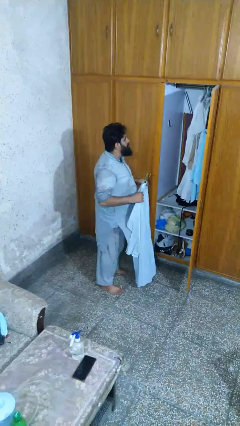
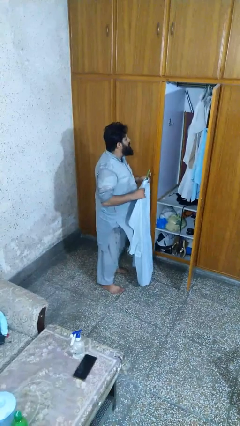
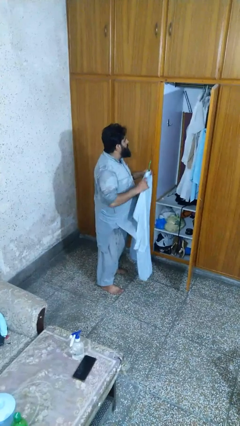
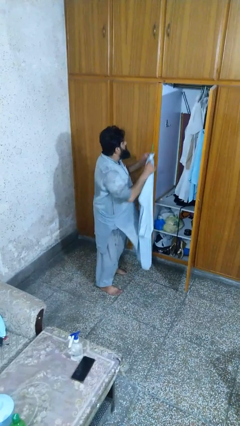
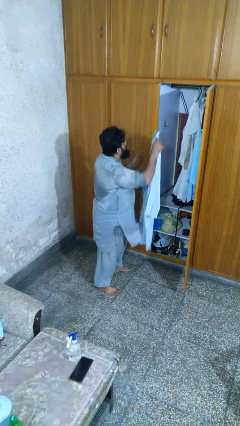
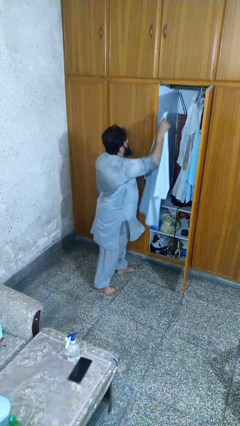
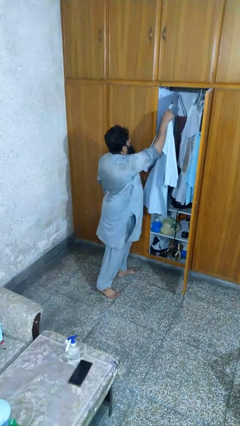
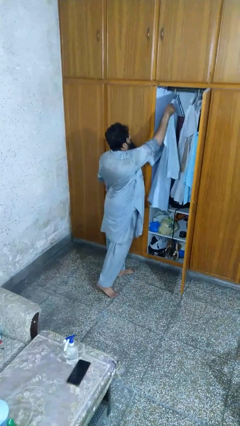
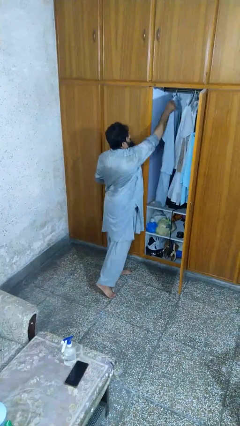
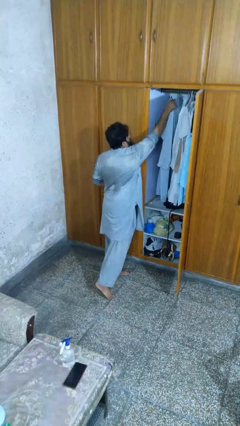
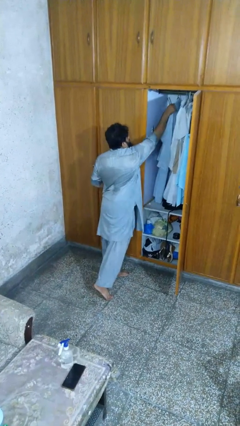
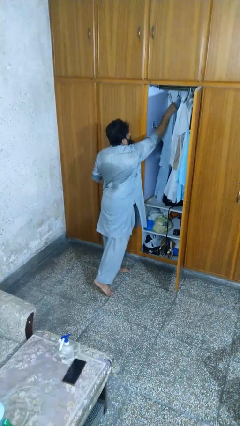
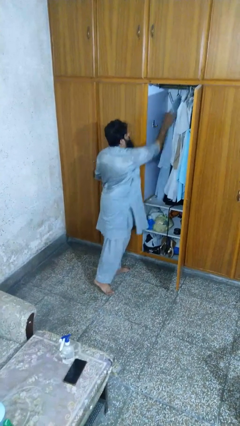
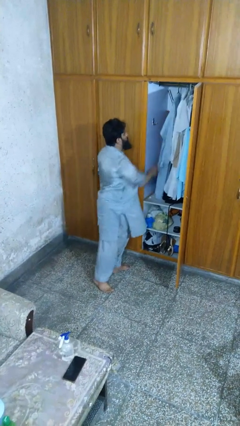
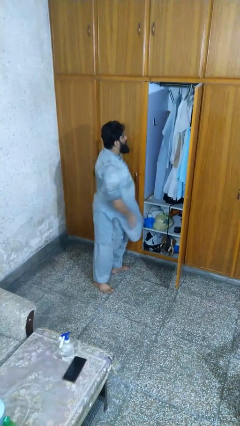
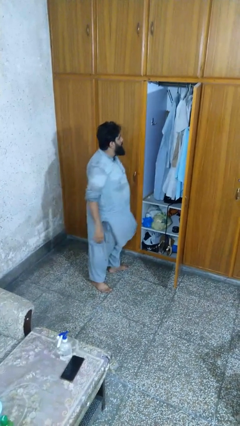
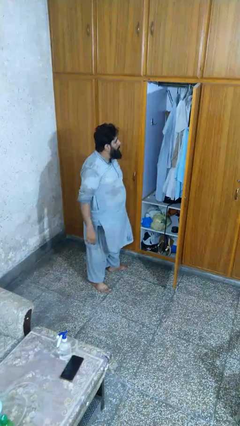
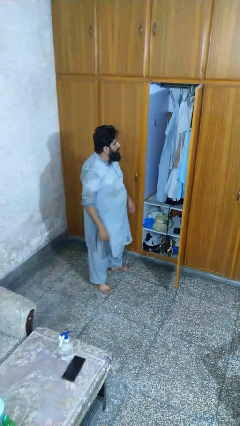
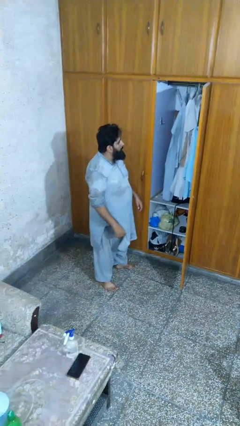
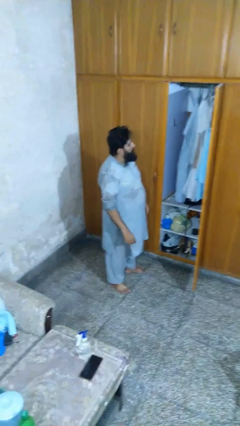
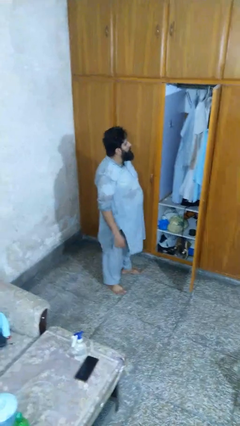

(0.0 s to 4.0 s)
person puts clothes into closet

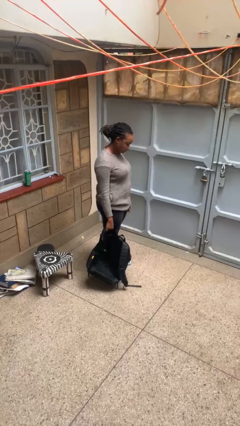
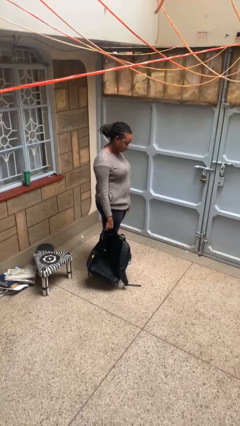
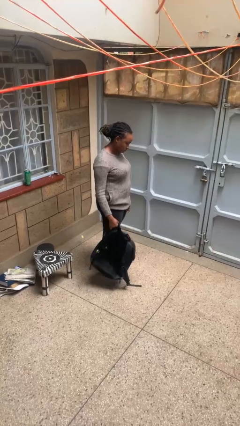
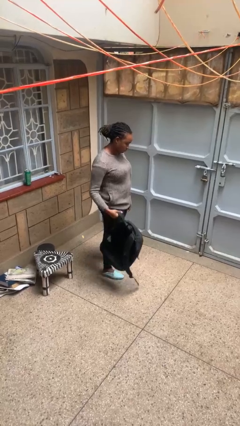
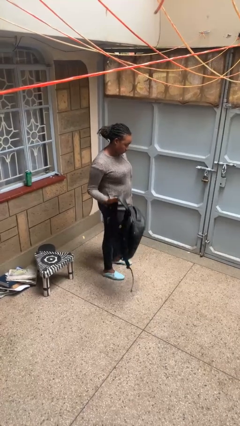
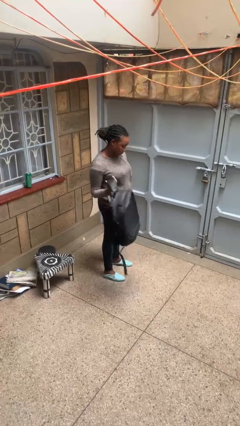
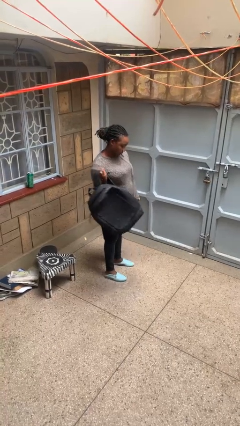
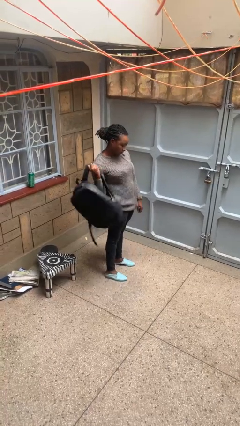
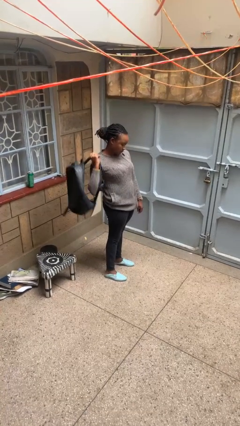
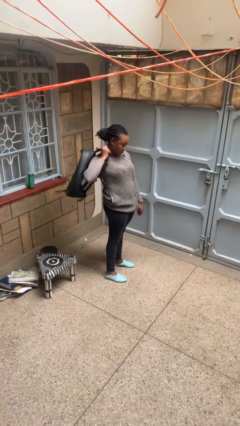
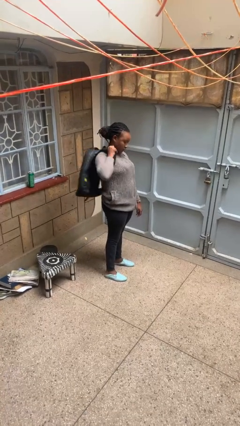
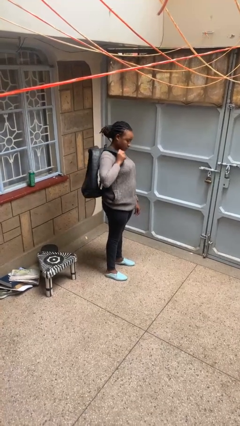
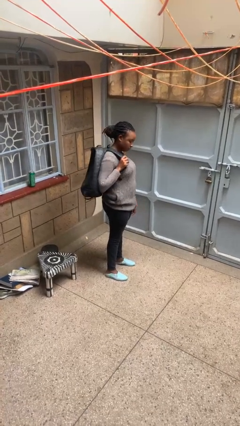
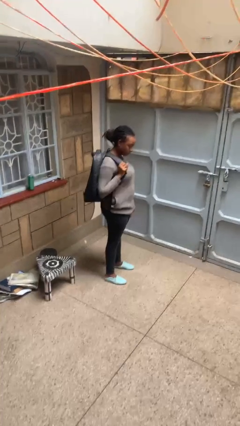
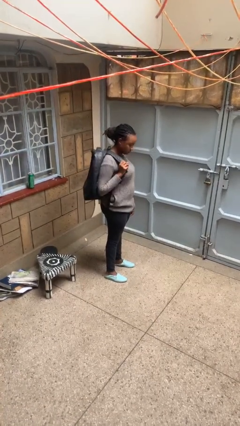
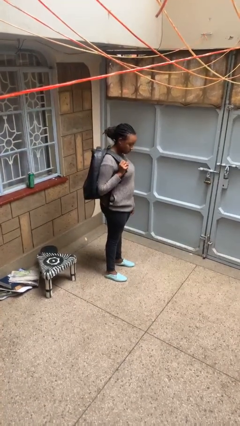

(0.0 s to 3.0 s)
person puts on backpack

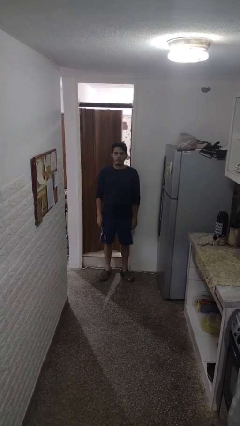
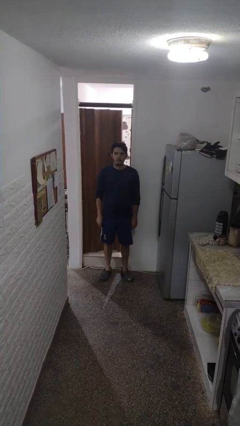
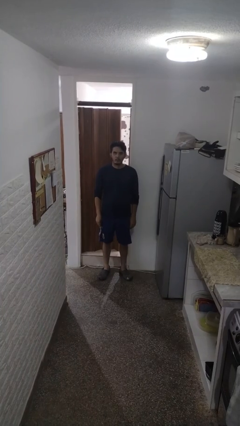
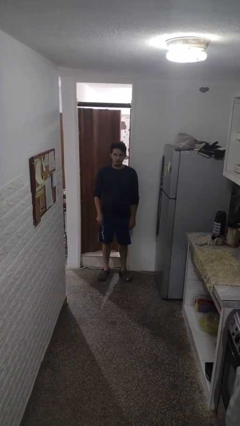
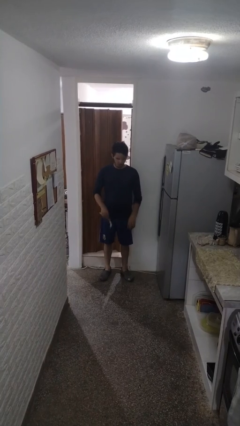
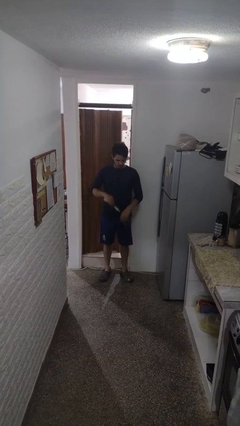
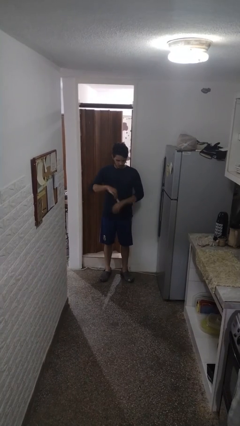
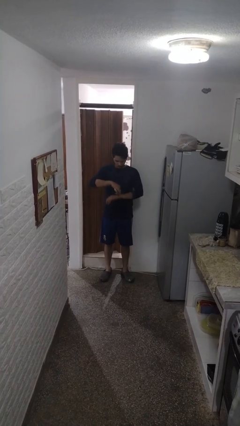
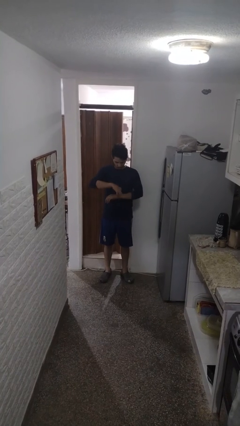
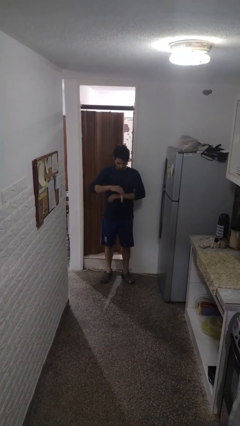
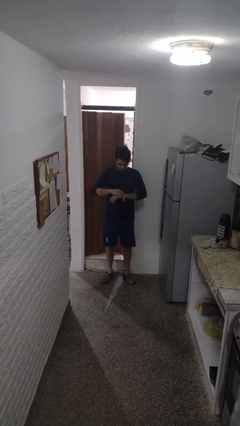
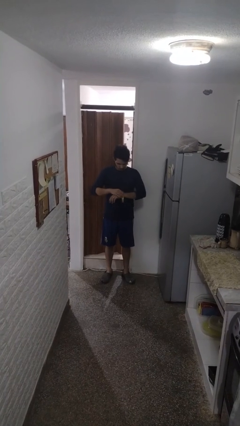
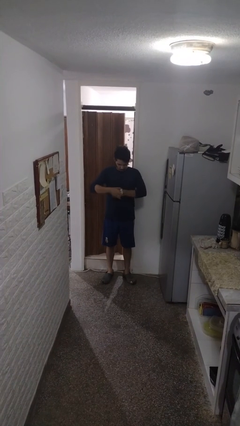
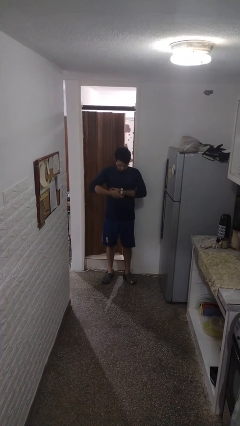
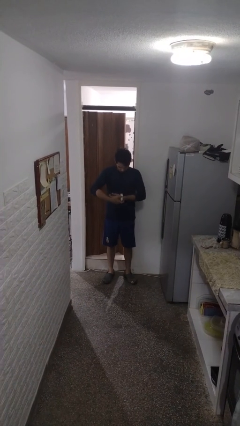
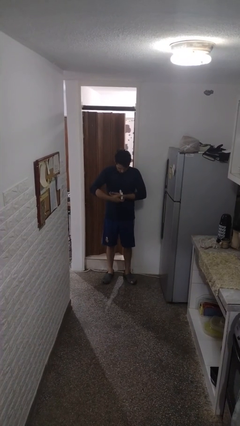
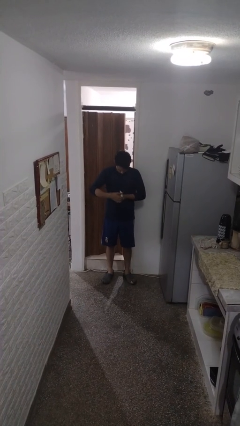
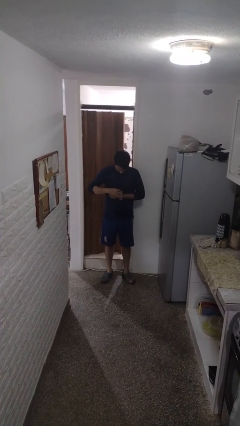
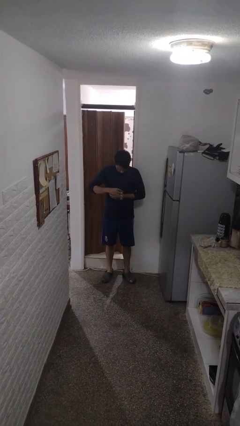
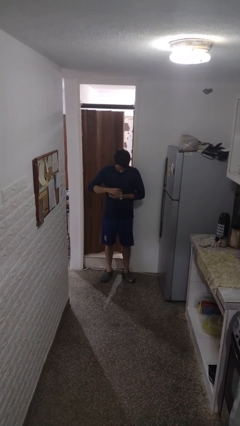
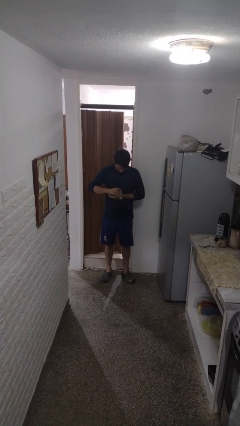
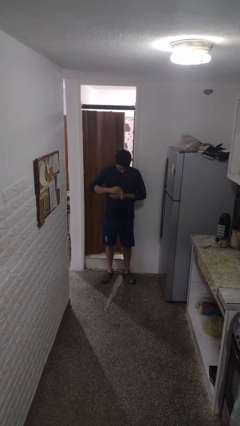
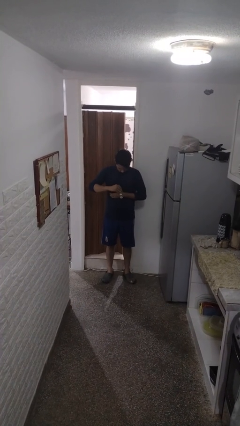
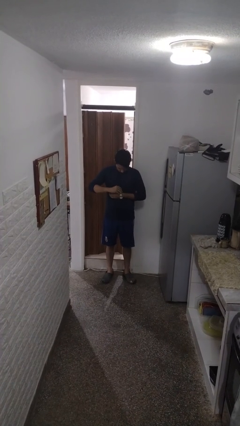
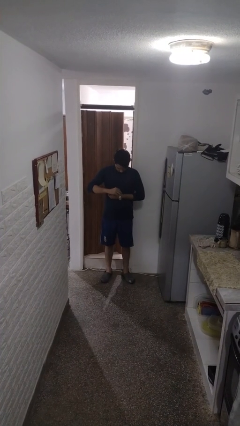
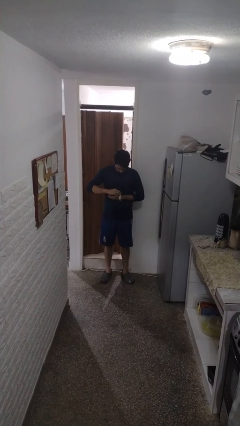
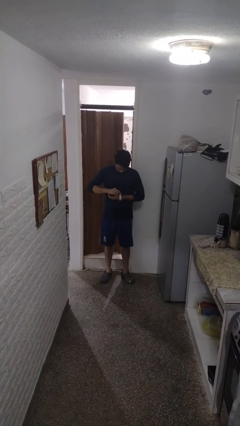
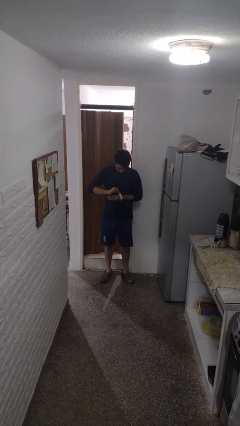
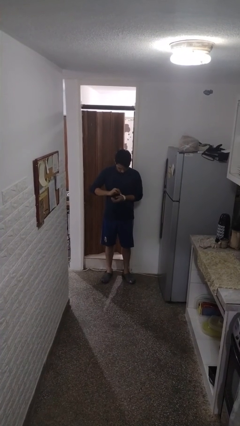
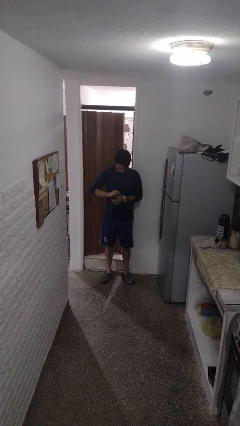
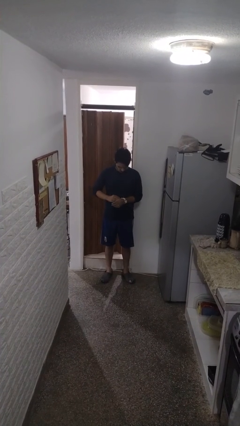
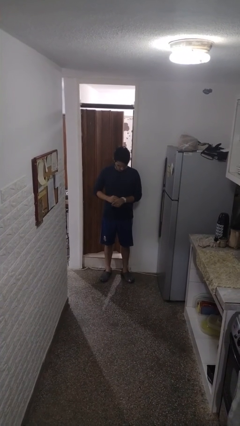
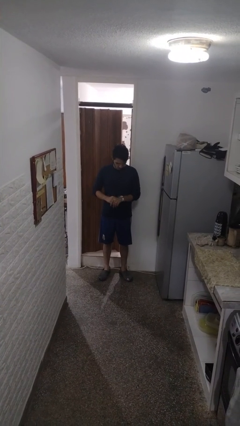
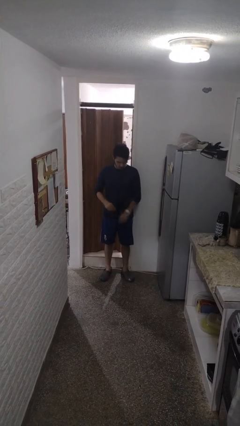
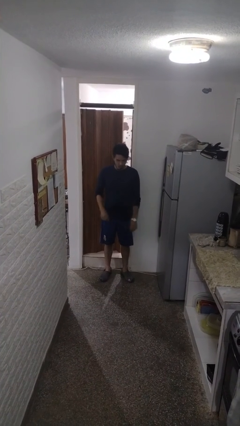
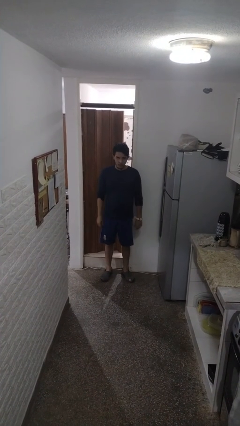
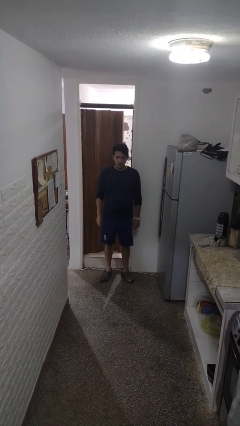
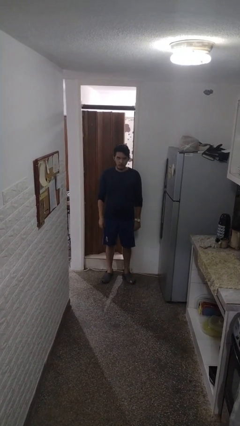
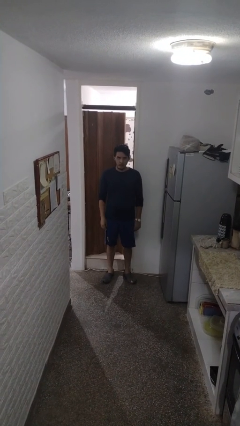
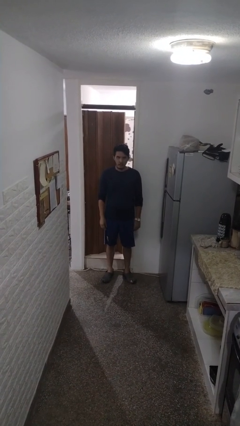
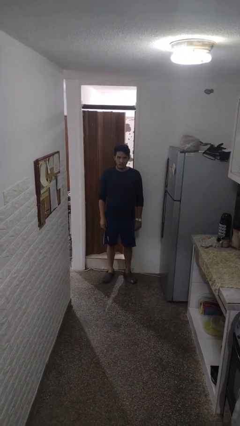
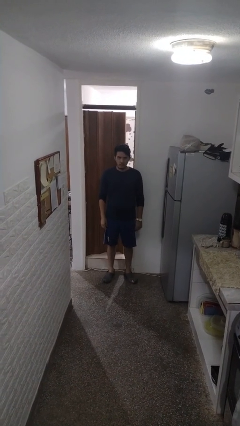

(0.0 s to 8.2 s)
person puts on wristwatch

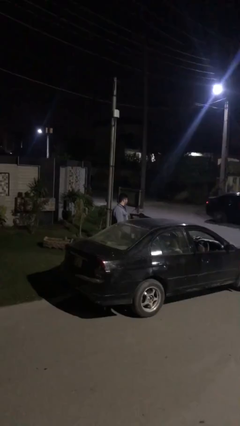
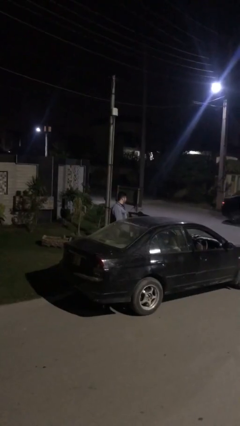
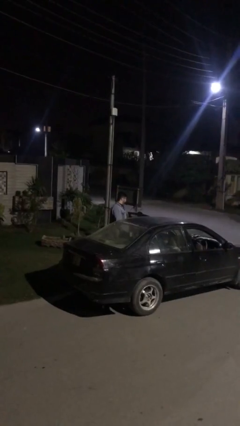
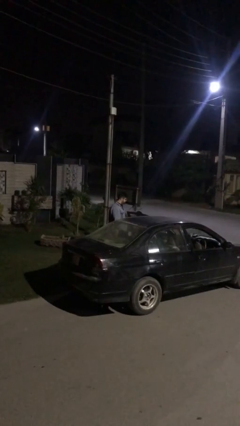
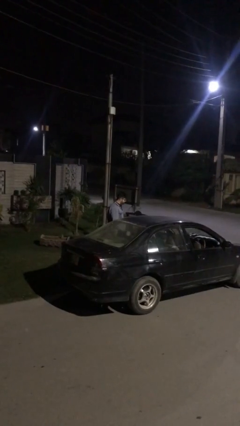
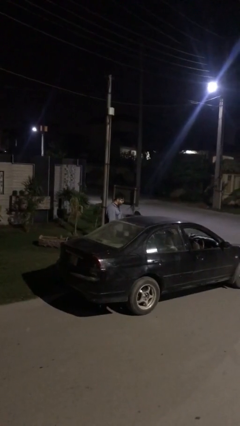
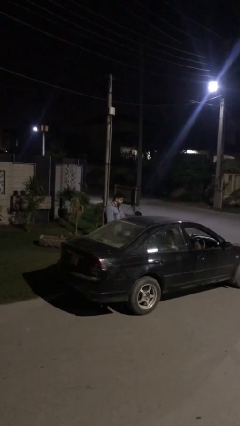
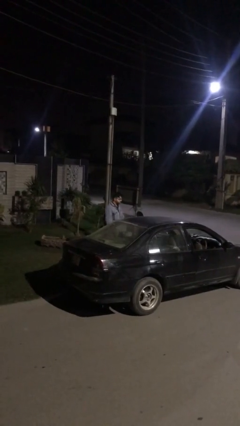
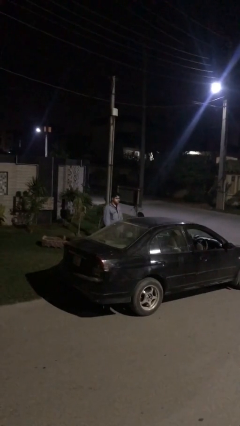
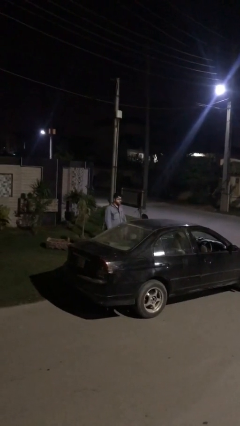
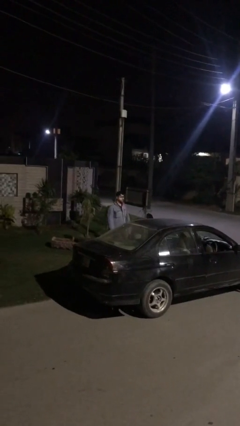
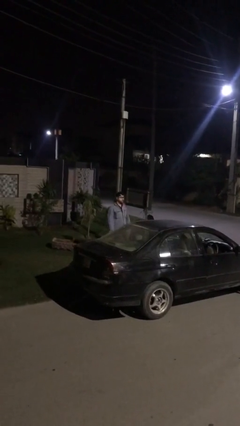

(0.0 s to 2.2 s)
person closes car door

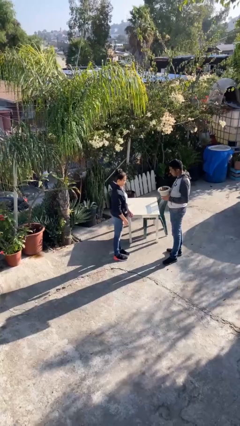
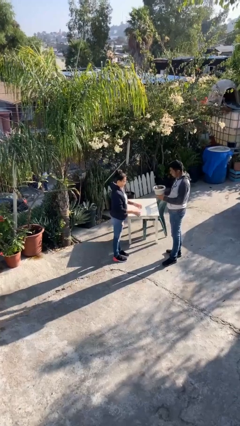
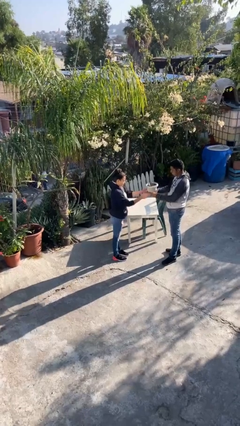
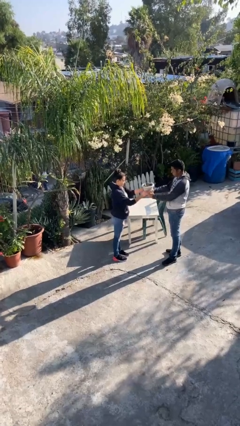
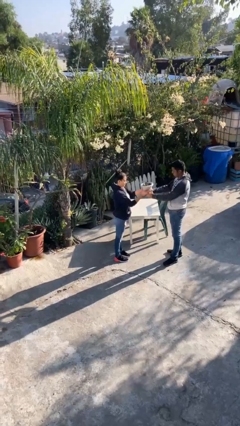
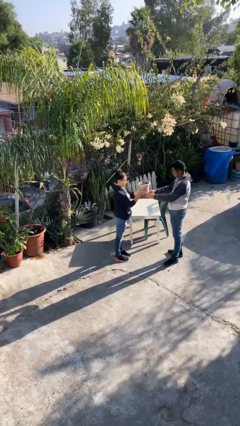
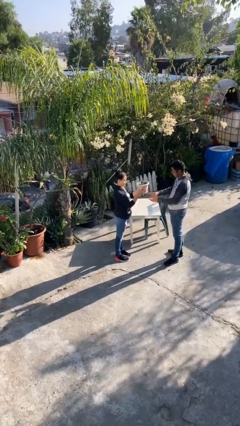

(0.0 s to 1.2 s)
person transfers object to person
